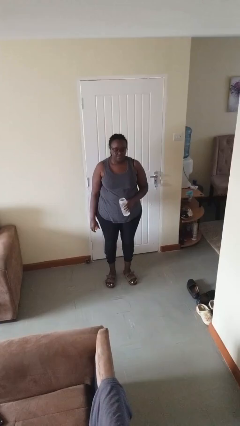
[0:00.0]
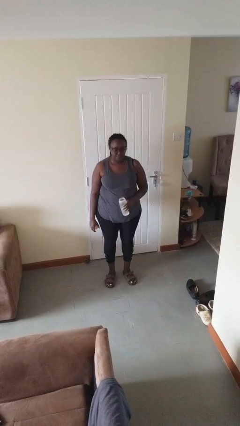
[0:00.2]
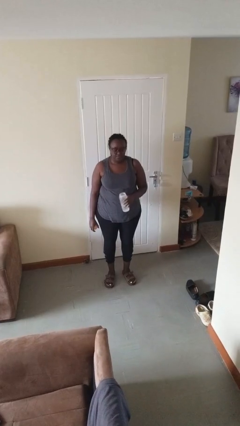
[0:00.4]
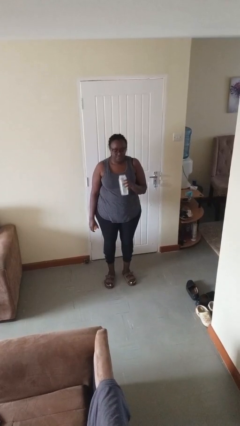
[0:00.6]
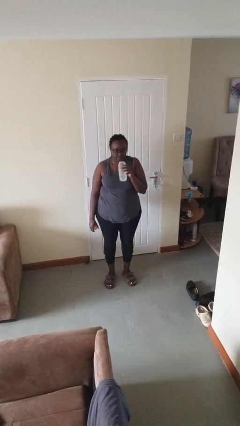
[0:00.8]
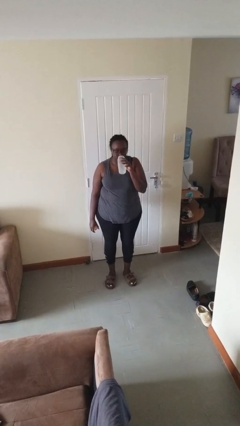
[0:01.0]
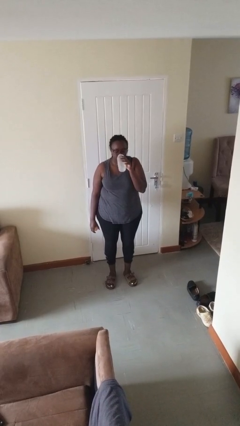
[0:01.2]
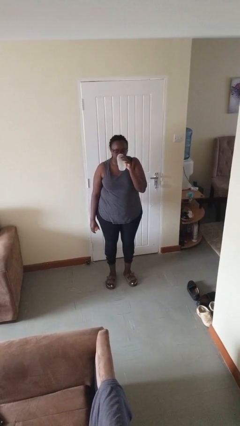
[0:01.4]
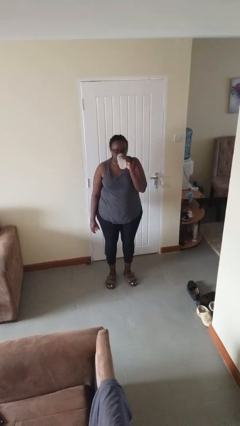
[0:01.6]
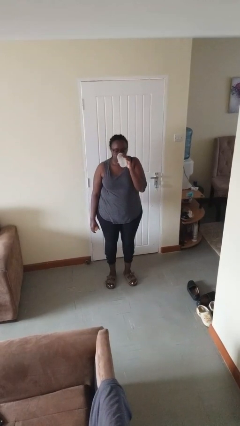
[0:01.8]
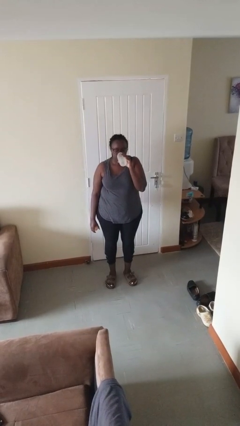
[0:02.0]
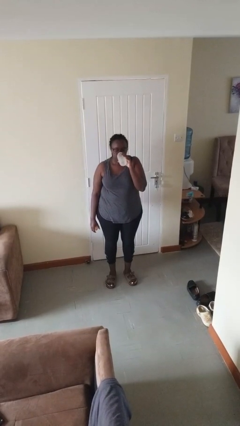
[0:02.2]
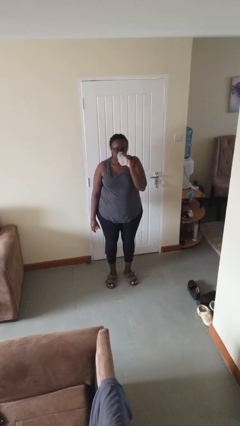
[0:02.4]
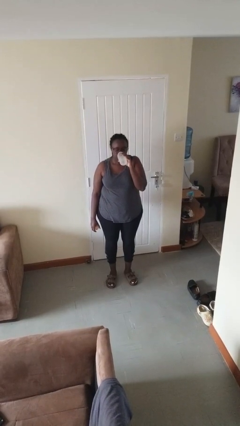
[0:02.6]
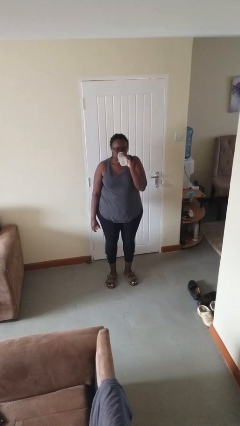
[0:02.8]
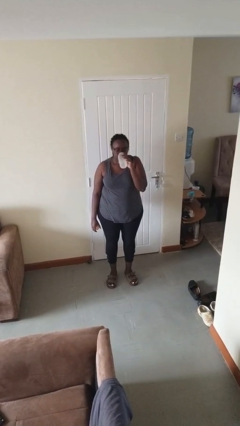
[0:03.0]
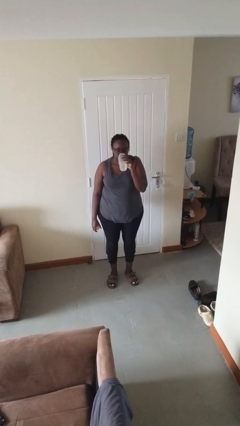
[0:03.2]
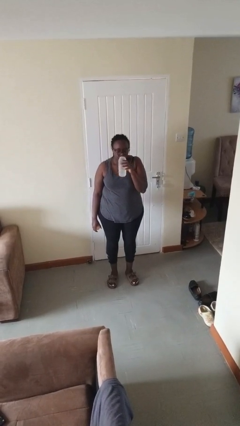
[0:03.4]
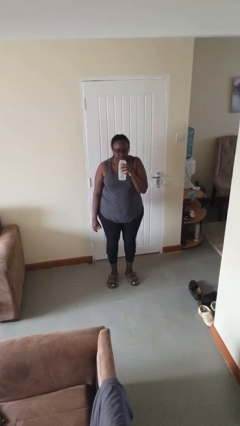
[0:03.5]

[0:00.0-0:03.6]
person drinks from bottle

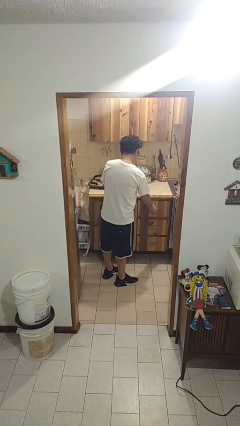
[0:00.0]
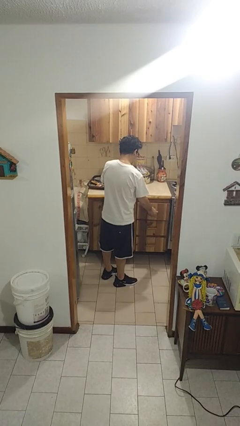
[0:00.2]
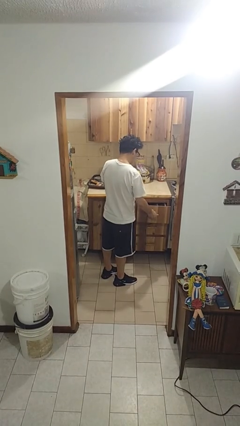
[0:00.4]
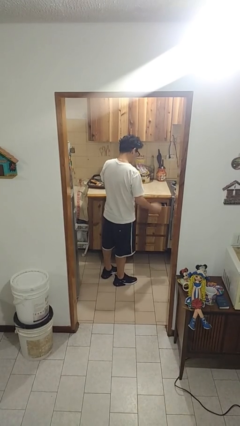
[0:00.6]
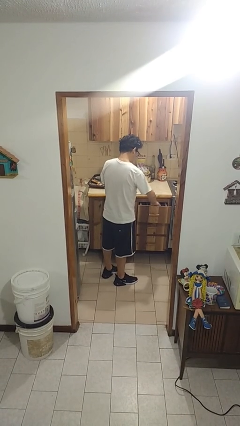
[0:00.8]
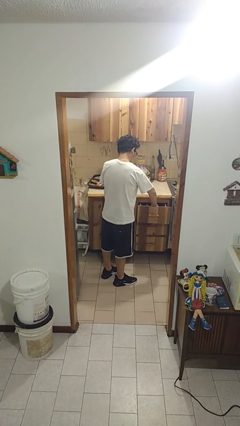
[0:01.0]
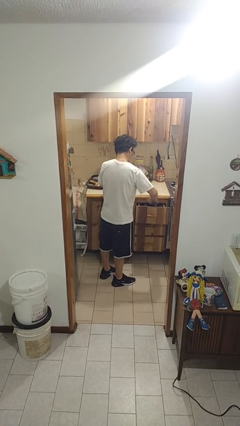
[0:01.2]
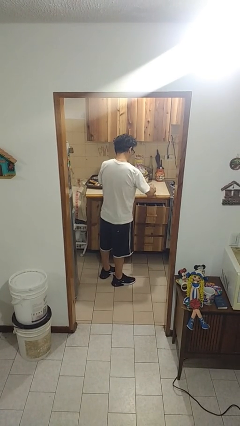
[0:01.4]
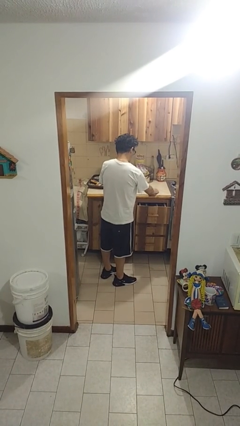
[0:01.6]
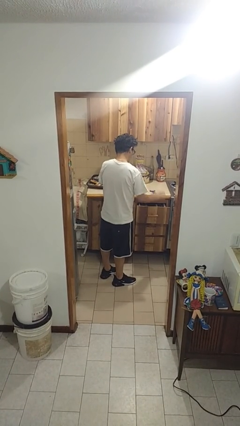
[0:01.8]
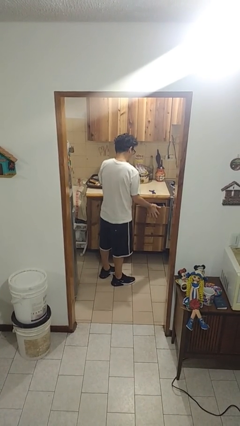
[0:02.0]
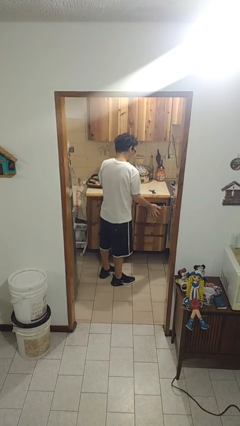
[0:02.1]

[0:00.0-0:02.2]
person takes object from kitchen drawer

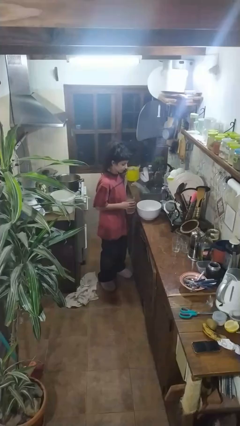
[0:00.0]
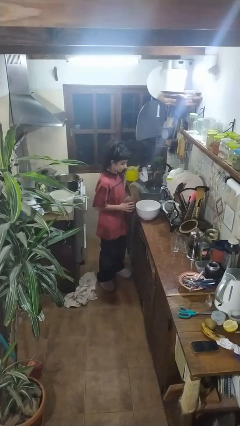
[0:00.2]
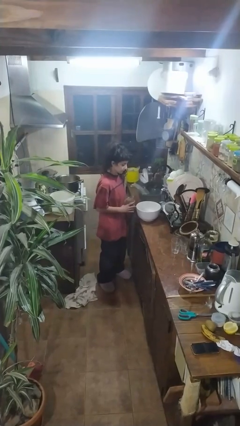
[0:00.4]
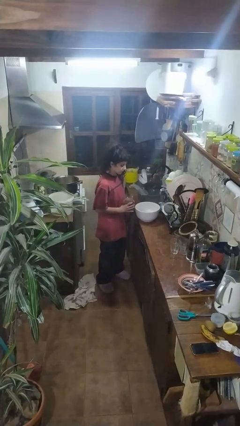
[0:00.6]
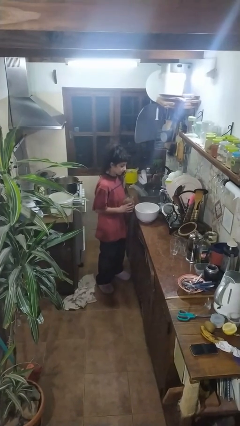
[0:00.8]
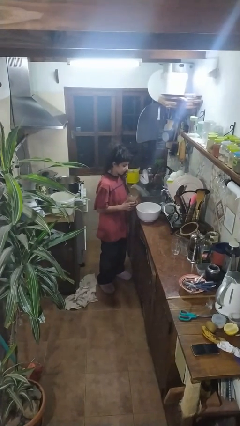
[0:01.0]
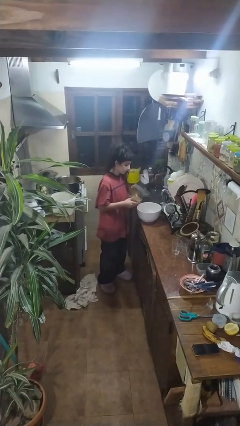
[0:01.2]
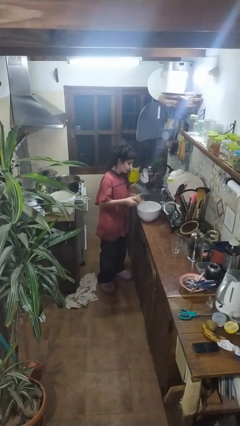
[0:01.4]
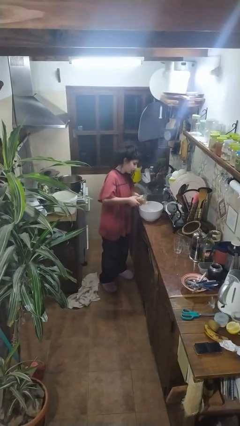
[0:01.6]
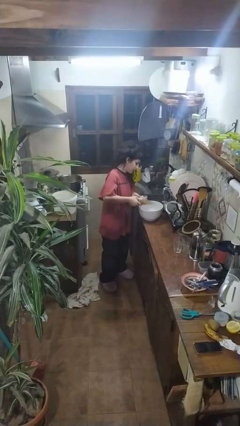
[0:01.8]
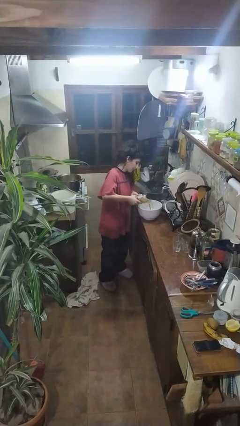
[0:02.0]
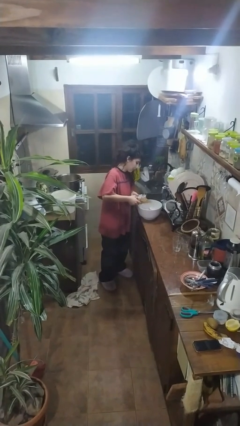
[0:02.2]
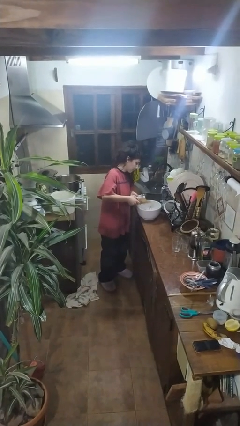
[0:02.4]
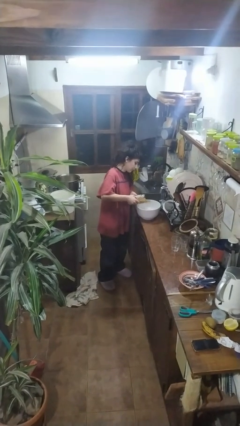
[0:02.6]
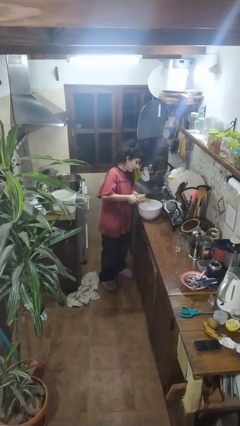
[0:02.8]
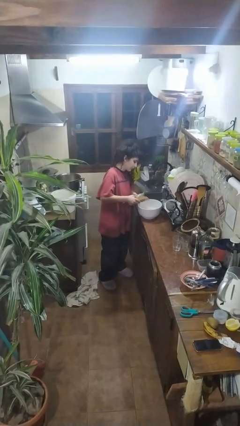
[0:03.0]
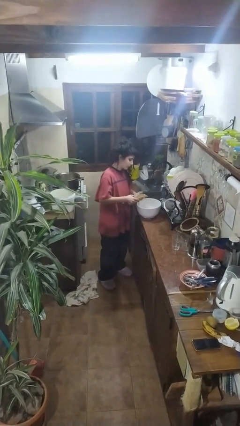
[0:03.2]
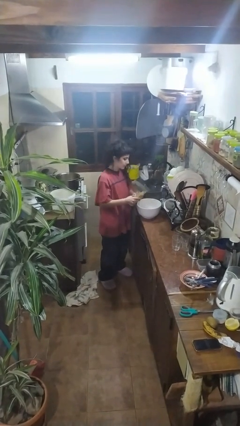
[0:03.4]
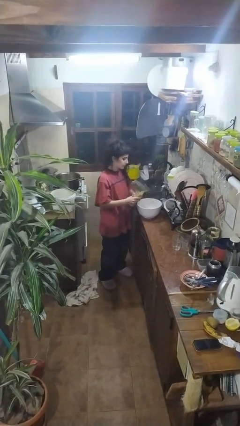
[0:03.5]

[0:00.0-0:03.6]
person pours into bowl

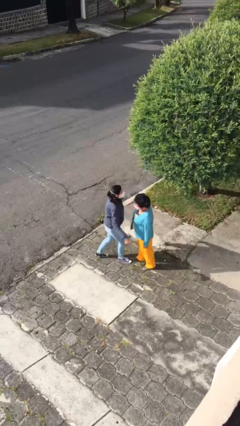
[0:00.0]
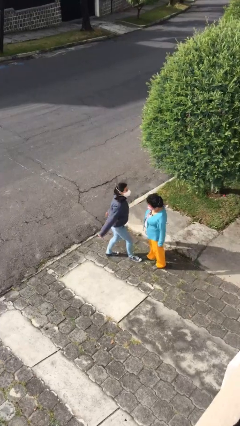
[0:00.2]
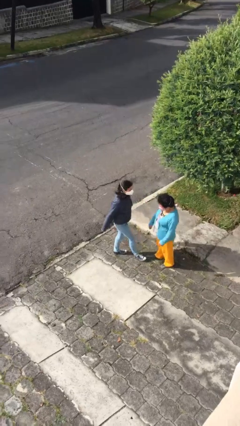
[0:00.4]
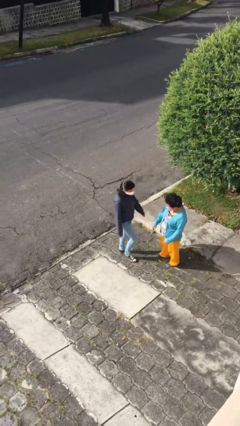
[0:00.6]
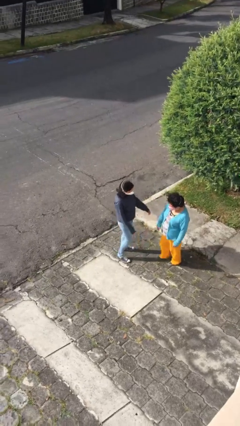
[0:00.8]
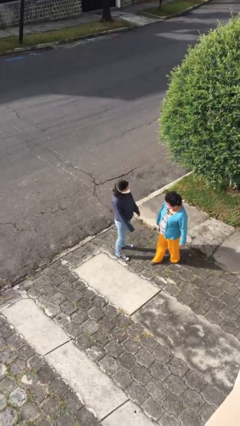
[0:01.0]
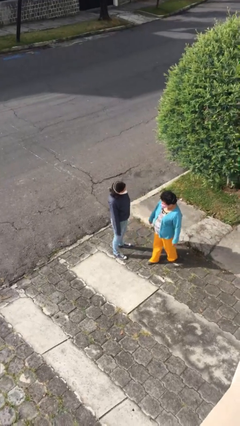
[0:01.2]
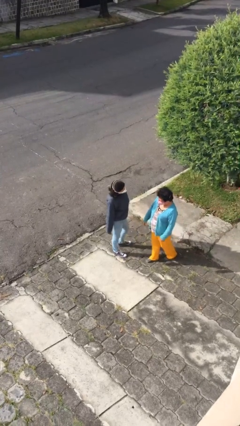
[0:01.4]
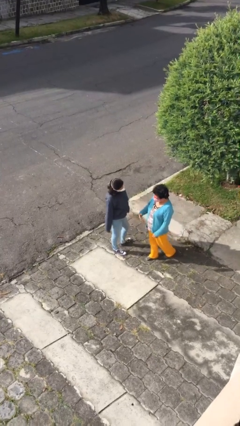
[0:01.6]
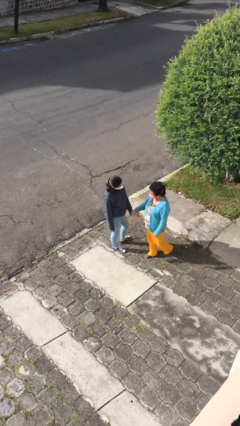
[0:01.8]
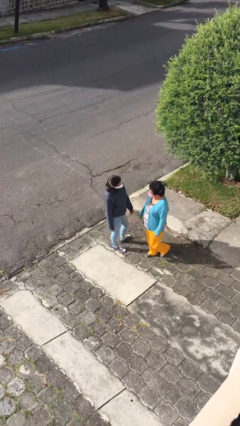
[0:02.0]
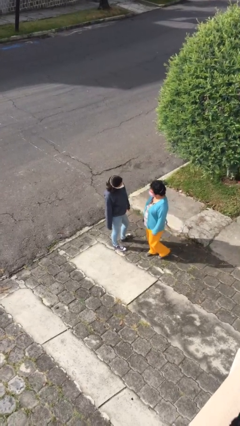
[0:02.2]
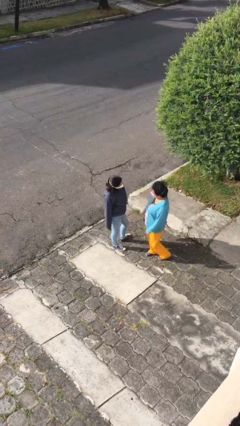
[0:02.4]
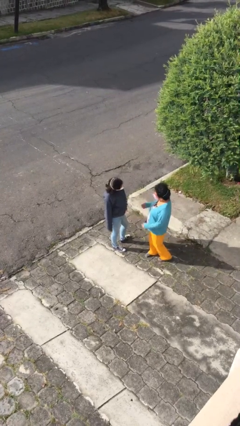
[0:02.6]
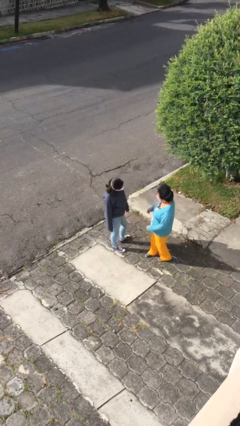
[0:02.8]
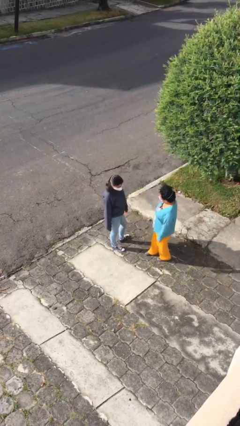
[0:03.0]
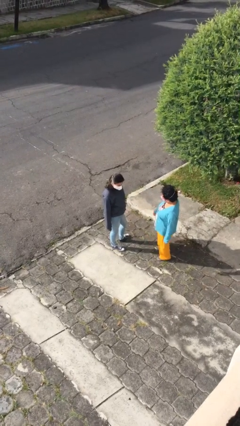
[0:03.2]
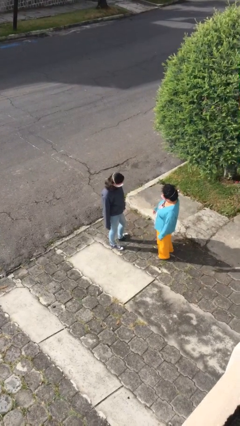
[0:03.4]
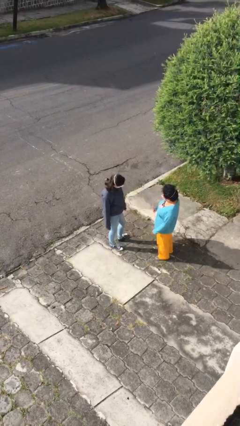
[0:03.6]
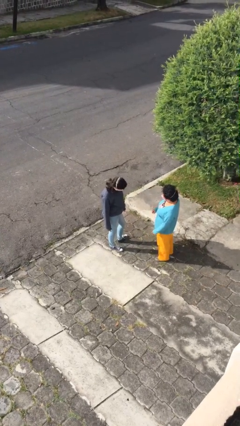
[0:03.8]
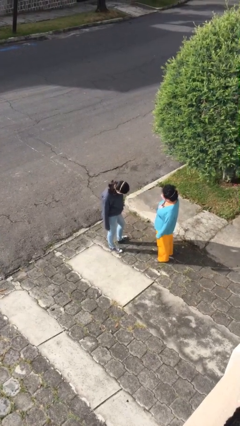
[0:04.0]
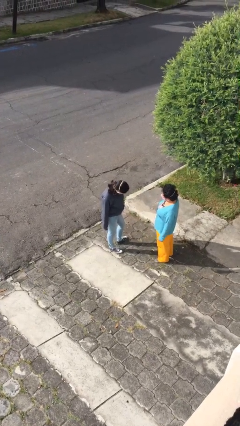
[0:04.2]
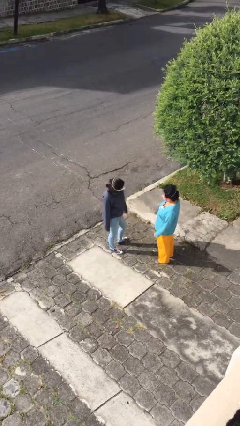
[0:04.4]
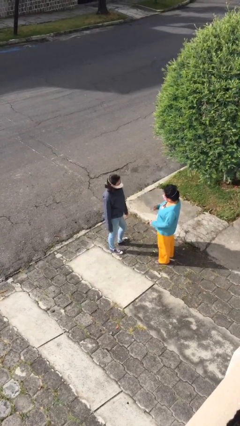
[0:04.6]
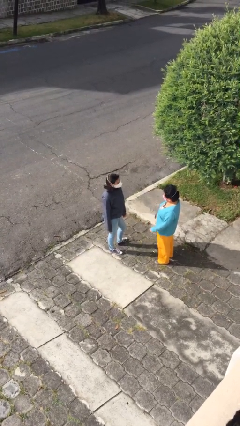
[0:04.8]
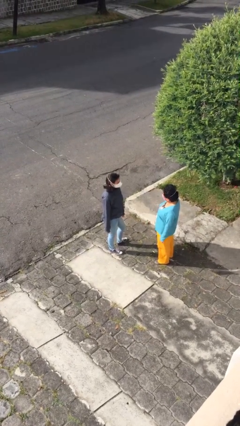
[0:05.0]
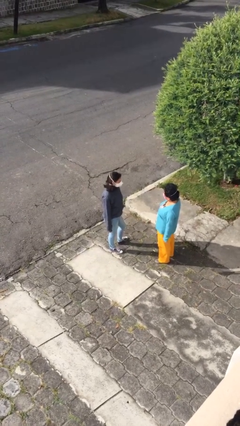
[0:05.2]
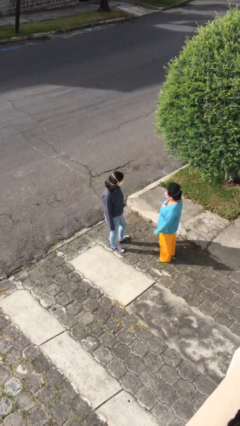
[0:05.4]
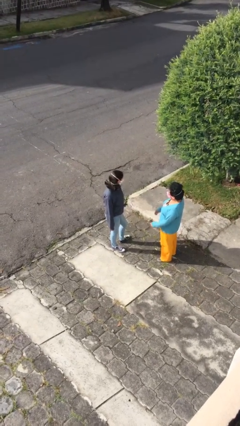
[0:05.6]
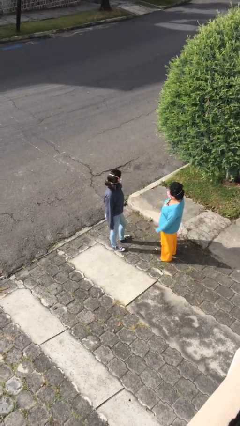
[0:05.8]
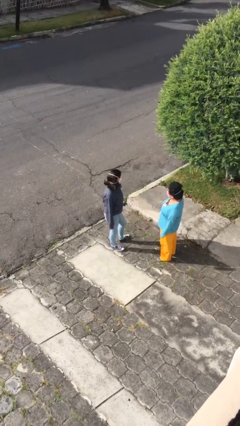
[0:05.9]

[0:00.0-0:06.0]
person talks to person

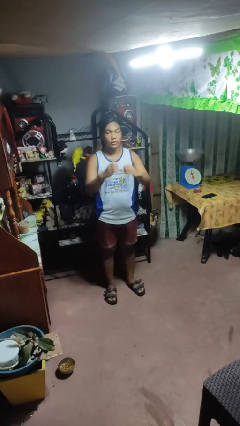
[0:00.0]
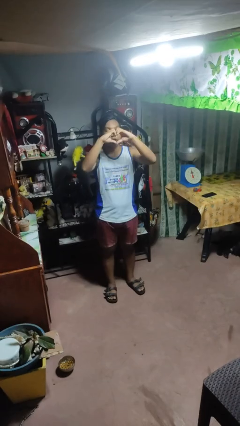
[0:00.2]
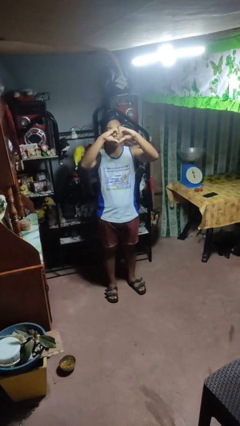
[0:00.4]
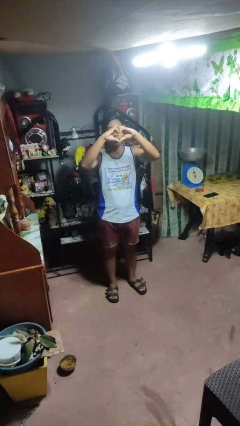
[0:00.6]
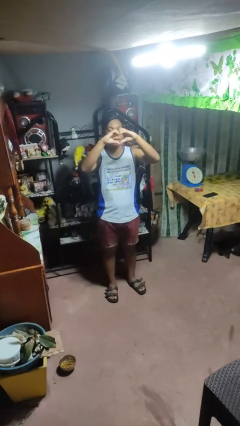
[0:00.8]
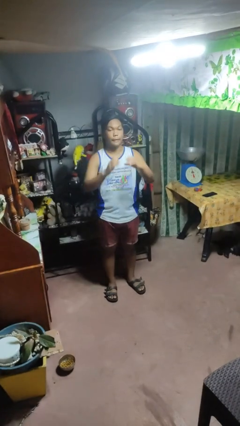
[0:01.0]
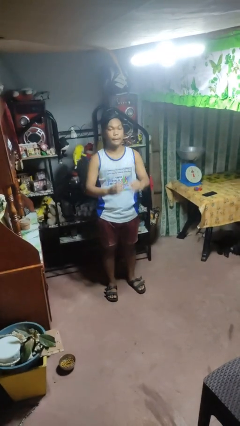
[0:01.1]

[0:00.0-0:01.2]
person gestures heart

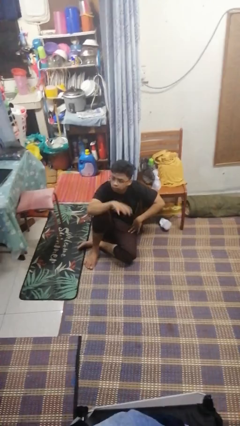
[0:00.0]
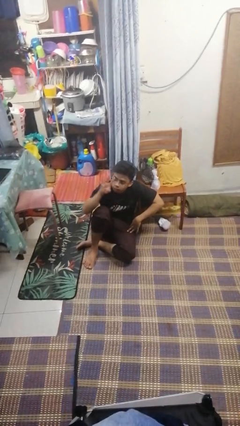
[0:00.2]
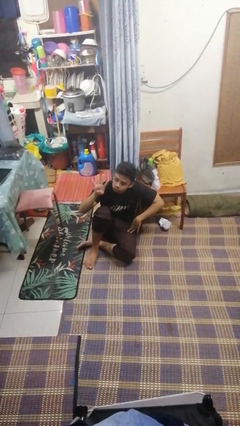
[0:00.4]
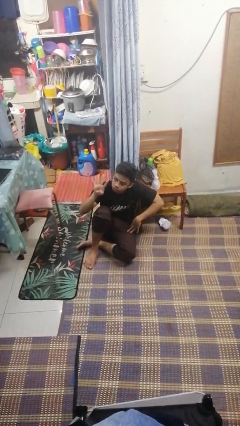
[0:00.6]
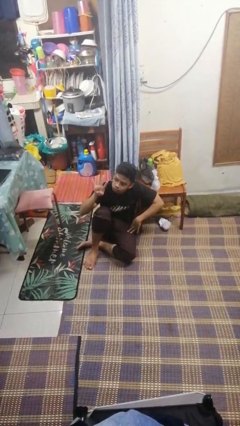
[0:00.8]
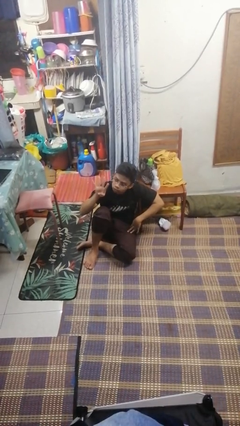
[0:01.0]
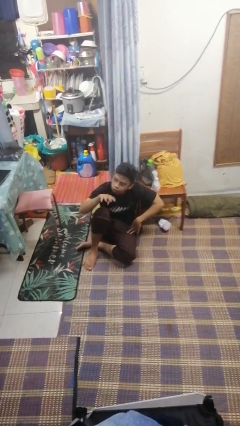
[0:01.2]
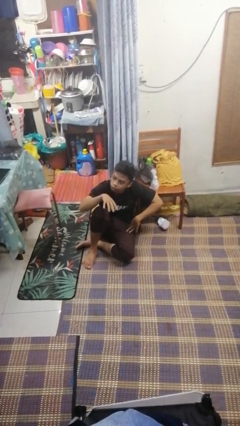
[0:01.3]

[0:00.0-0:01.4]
person gestures number four
